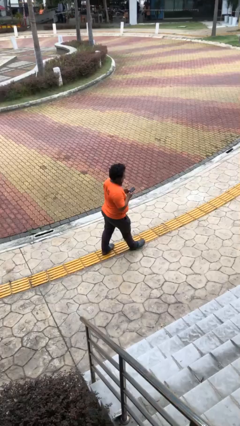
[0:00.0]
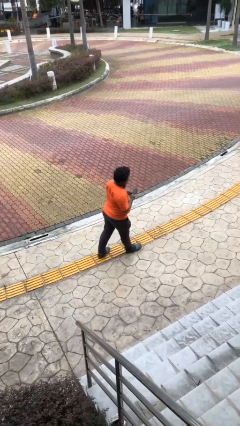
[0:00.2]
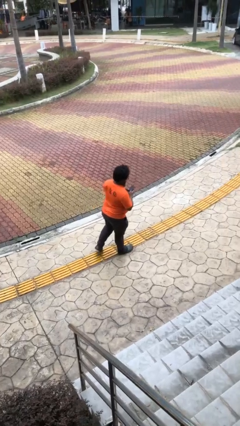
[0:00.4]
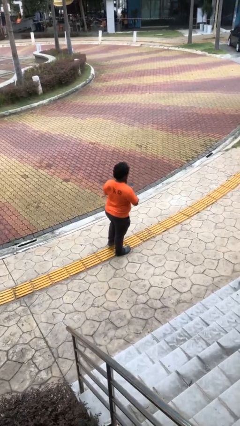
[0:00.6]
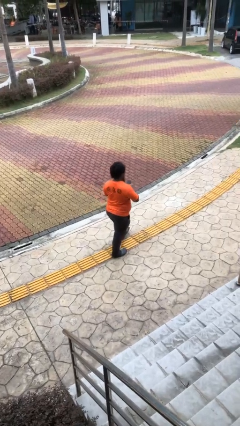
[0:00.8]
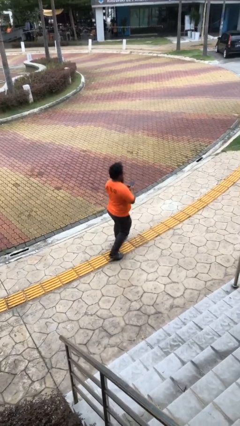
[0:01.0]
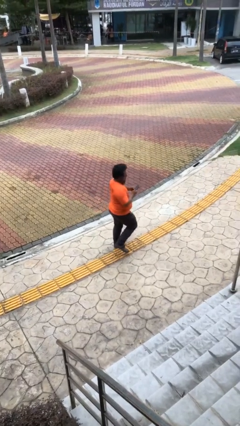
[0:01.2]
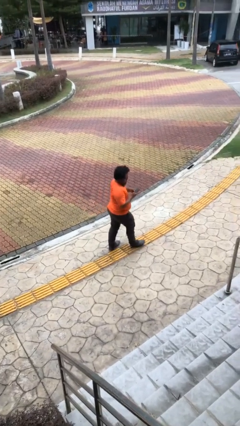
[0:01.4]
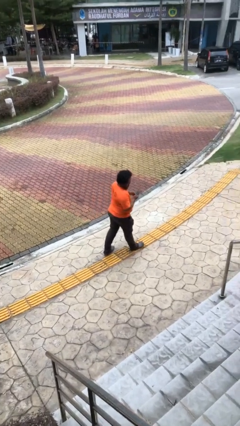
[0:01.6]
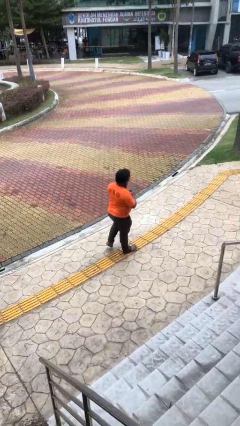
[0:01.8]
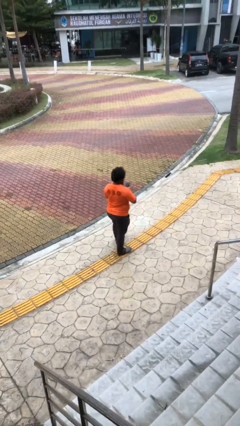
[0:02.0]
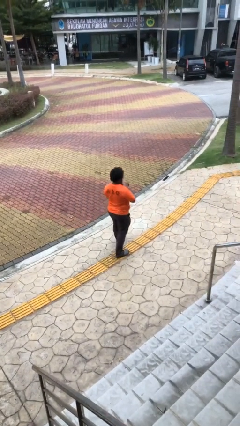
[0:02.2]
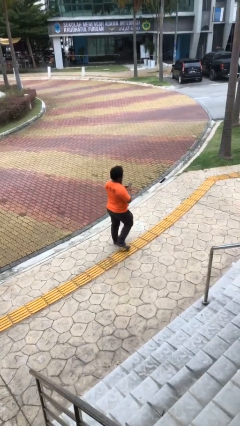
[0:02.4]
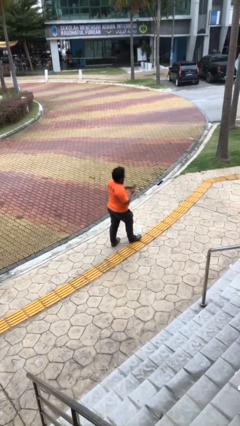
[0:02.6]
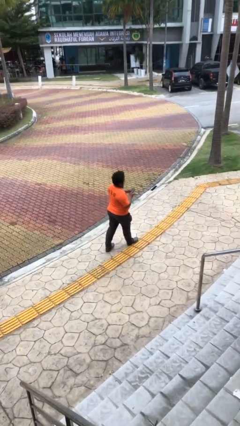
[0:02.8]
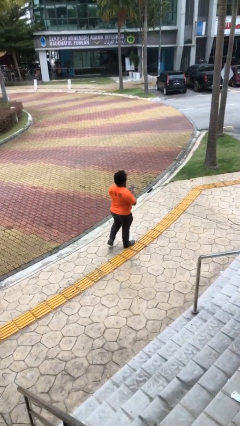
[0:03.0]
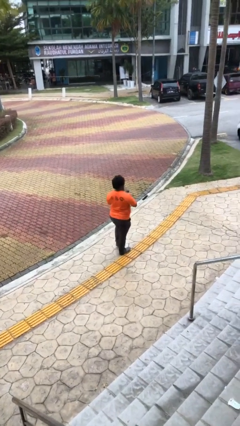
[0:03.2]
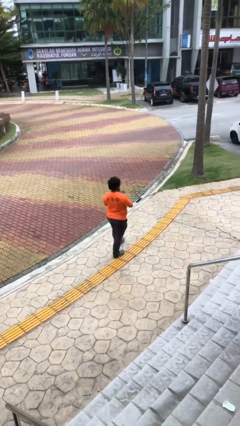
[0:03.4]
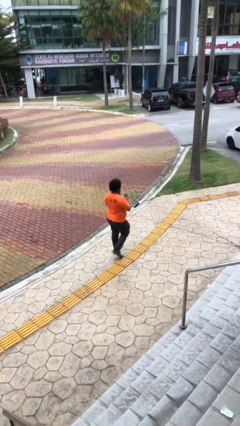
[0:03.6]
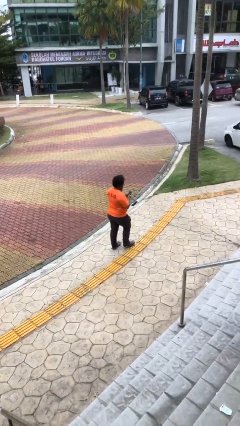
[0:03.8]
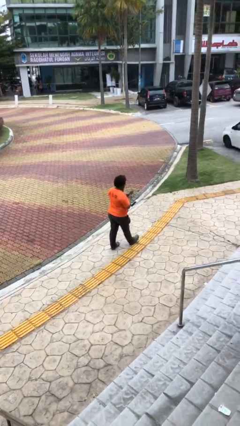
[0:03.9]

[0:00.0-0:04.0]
person texts on phone

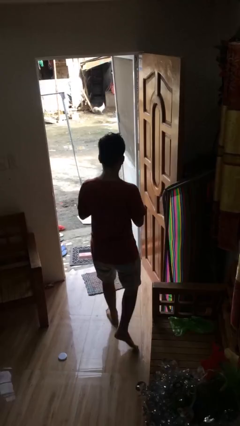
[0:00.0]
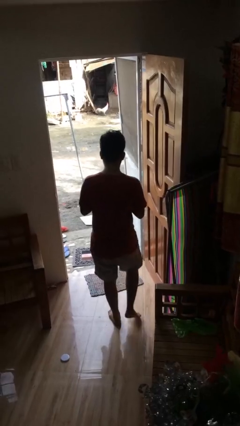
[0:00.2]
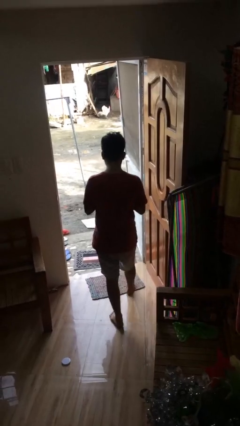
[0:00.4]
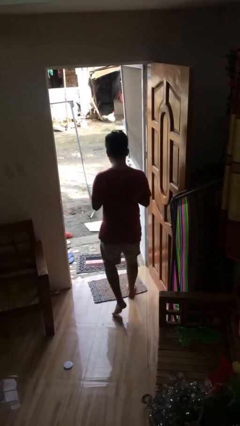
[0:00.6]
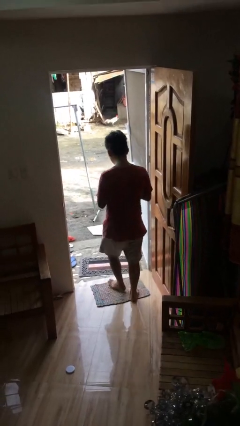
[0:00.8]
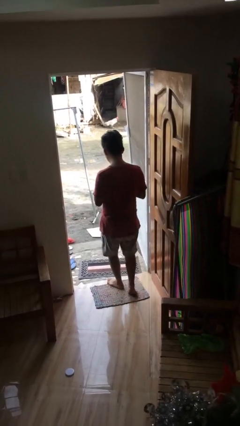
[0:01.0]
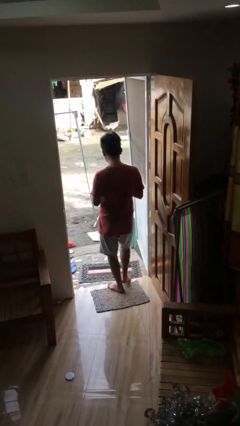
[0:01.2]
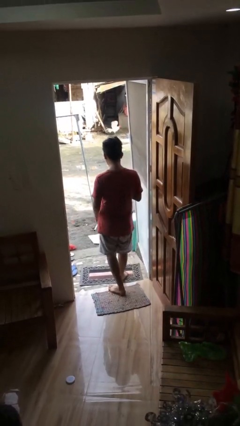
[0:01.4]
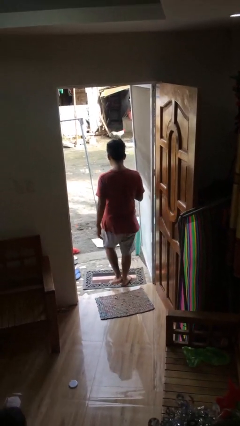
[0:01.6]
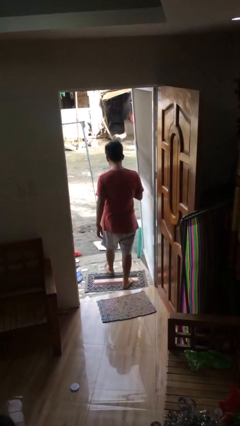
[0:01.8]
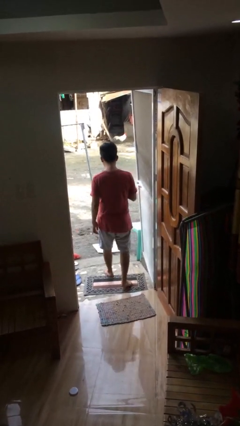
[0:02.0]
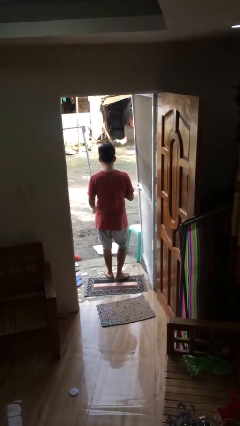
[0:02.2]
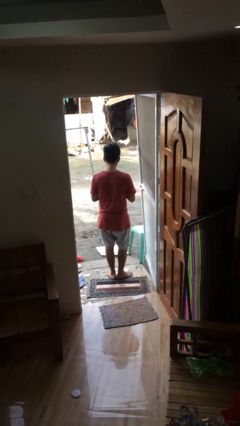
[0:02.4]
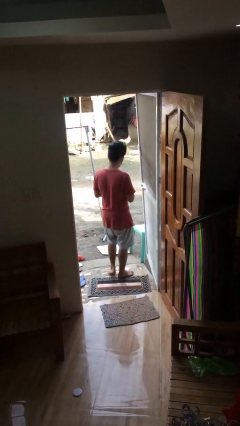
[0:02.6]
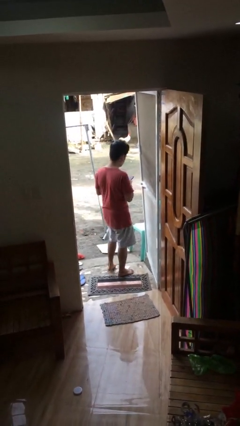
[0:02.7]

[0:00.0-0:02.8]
person exits scene through structure

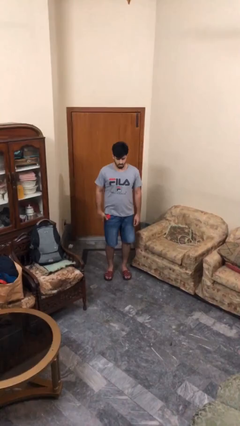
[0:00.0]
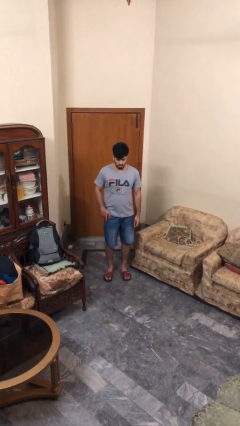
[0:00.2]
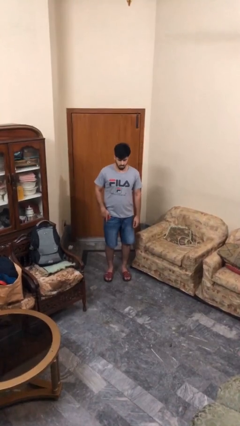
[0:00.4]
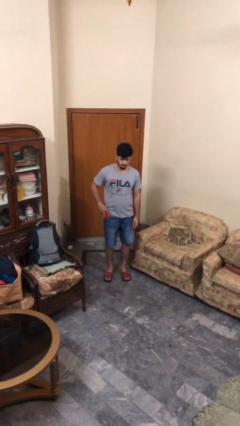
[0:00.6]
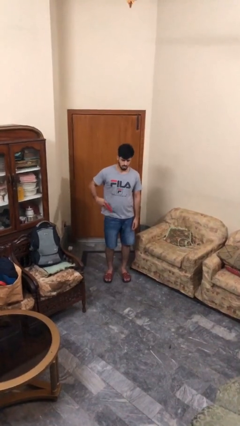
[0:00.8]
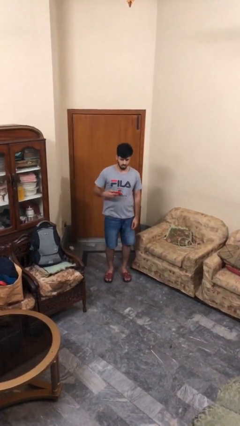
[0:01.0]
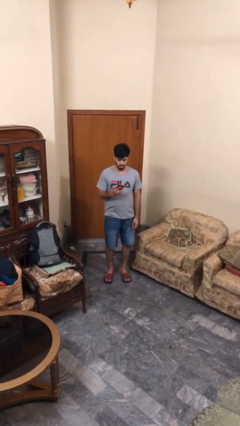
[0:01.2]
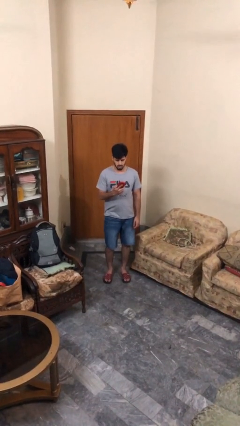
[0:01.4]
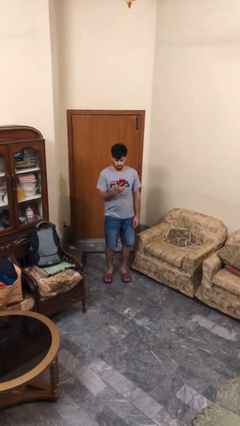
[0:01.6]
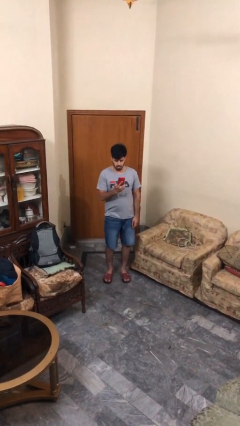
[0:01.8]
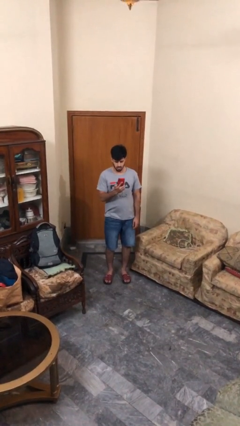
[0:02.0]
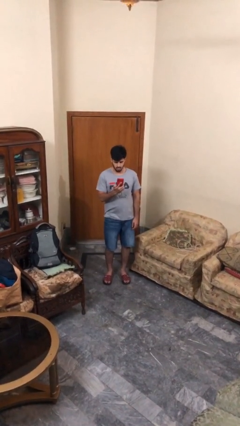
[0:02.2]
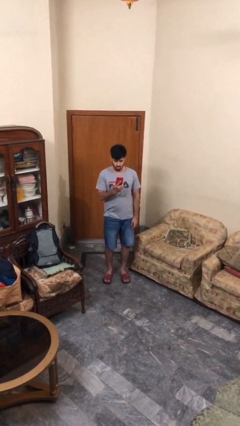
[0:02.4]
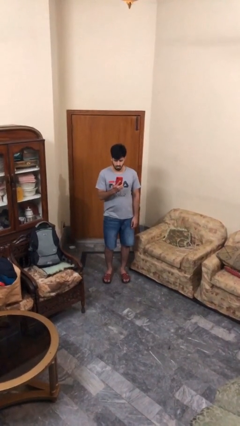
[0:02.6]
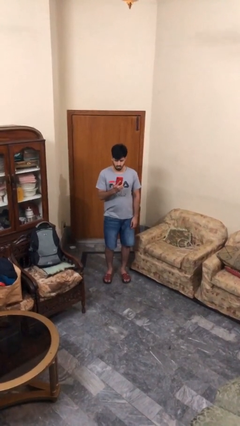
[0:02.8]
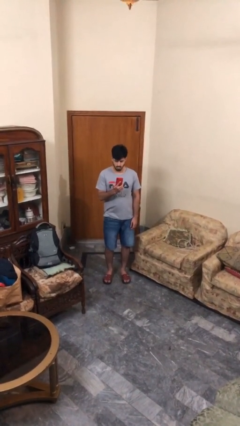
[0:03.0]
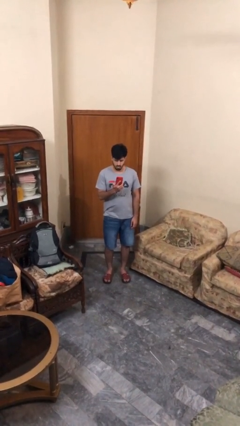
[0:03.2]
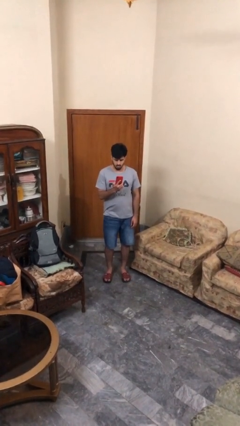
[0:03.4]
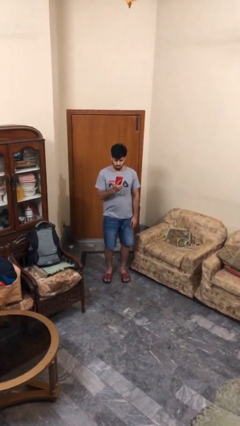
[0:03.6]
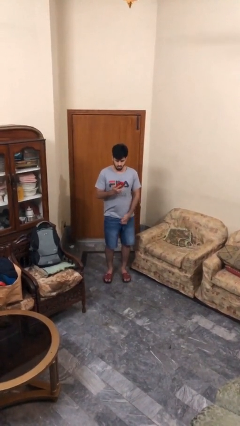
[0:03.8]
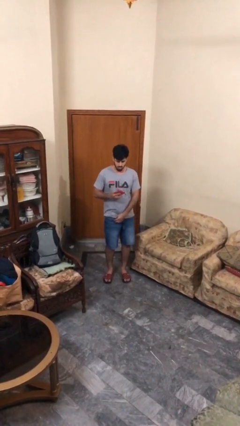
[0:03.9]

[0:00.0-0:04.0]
person takes phone from pocket

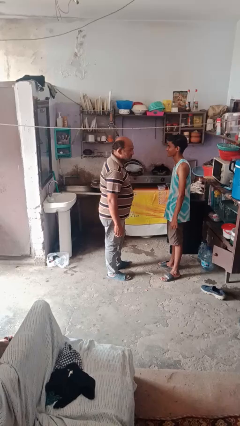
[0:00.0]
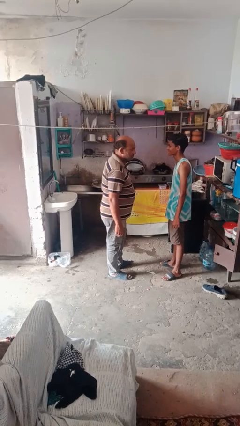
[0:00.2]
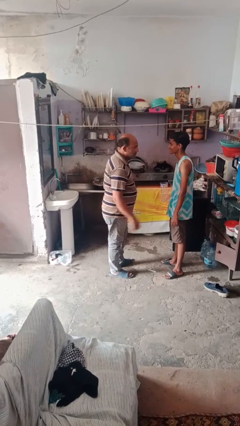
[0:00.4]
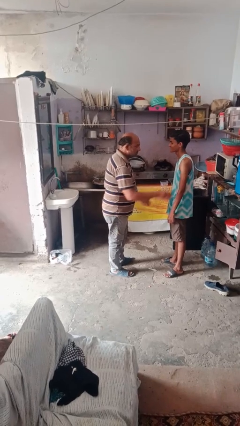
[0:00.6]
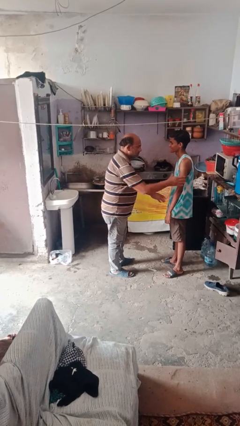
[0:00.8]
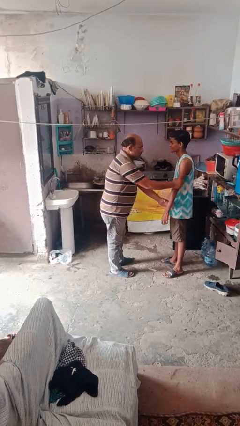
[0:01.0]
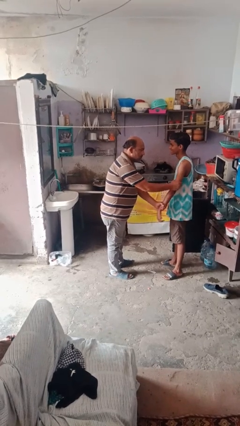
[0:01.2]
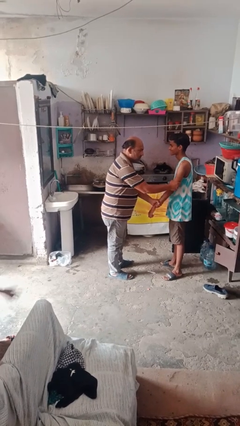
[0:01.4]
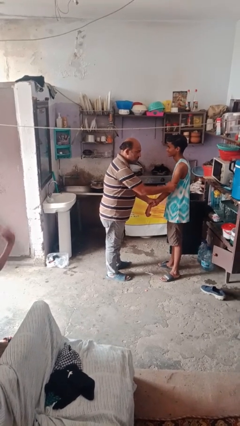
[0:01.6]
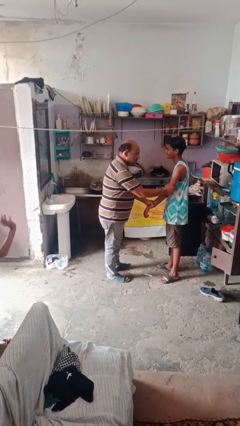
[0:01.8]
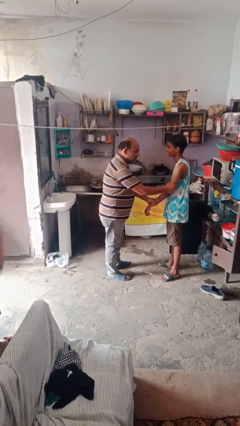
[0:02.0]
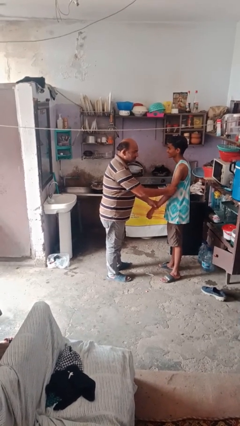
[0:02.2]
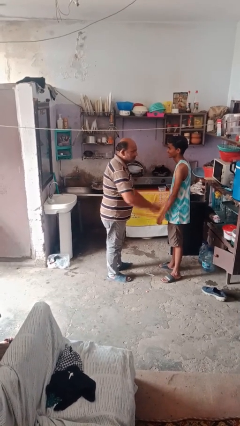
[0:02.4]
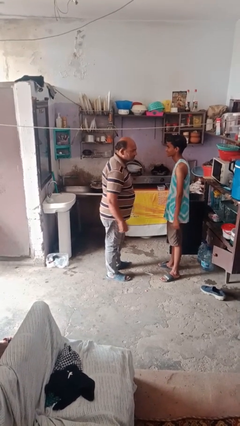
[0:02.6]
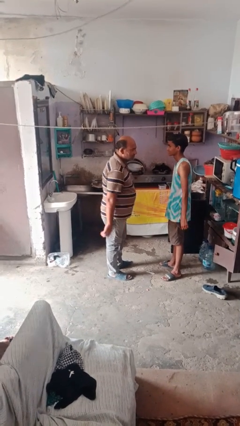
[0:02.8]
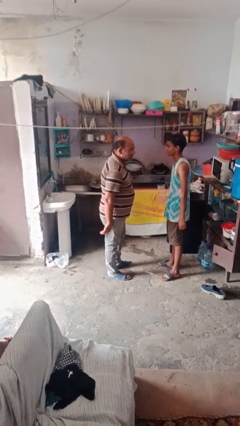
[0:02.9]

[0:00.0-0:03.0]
person grabs person by forearm

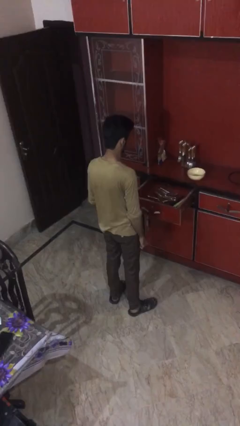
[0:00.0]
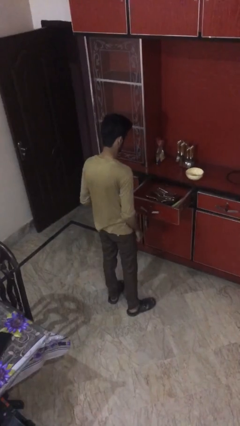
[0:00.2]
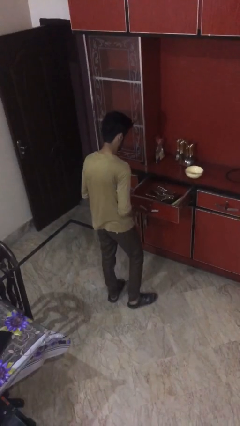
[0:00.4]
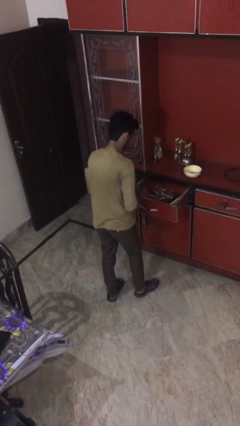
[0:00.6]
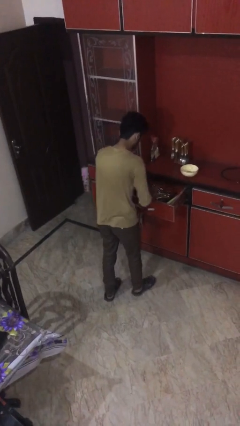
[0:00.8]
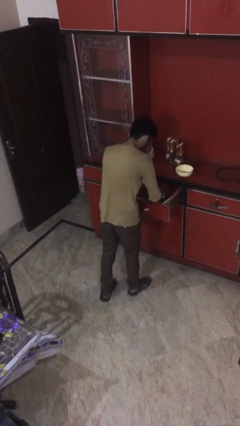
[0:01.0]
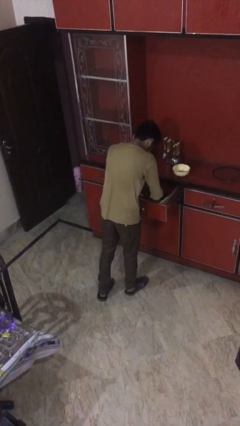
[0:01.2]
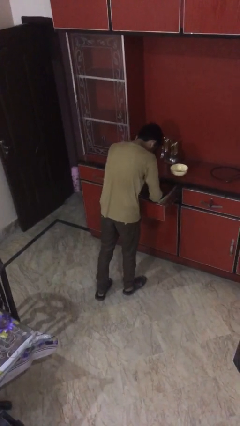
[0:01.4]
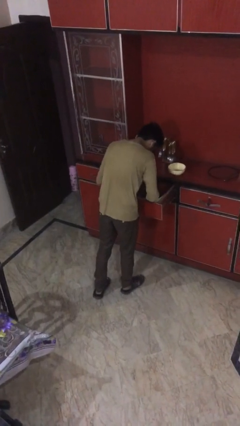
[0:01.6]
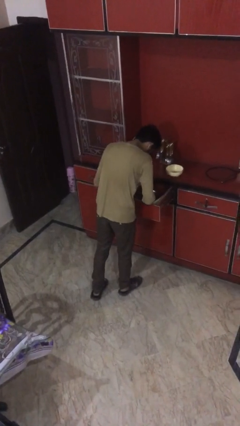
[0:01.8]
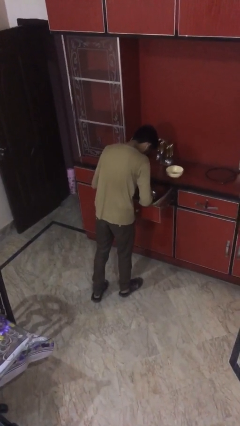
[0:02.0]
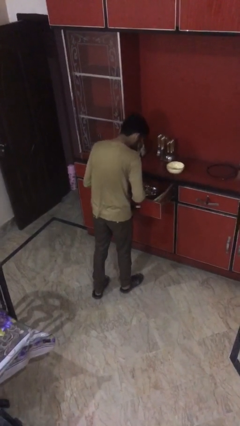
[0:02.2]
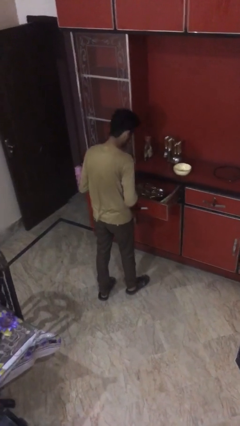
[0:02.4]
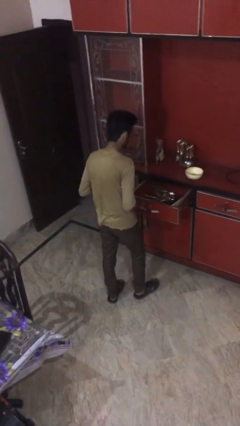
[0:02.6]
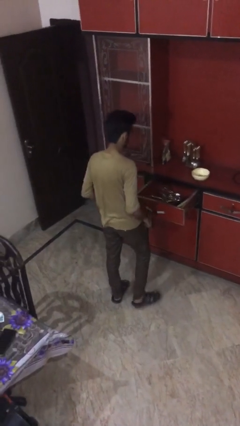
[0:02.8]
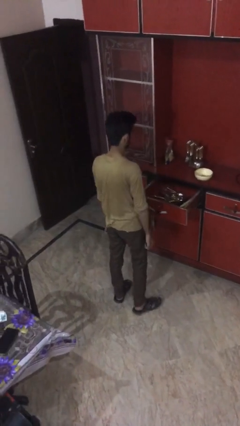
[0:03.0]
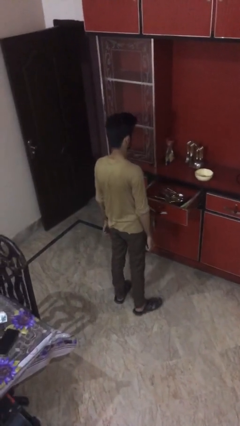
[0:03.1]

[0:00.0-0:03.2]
person searches in kitchen drawer

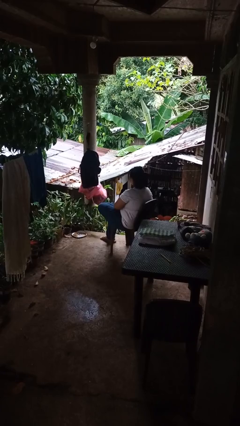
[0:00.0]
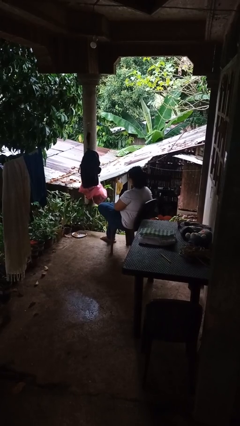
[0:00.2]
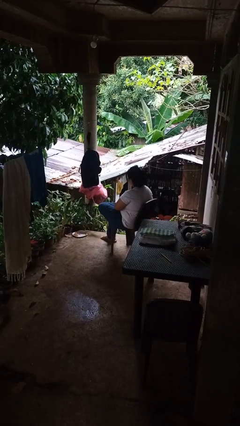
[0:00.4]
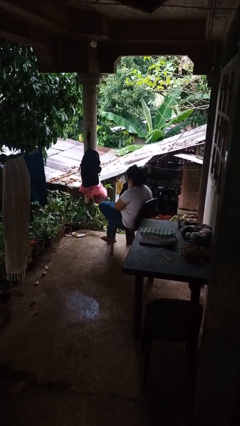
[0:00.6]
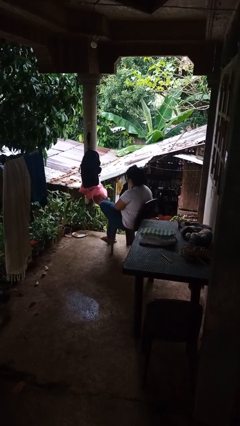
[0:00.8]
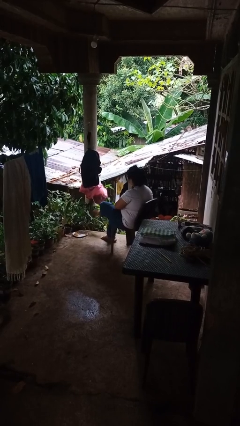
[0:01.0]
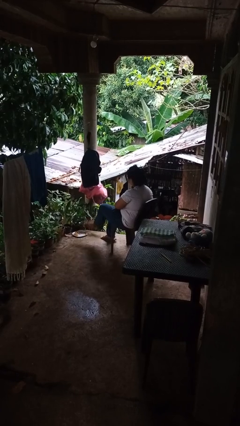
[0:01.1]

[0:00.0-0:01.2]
person crosses legs
